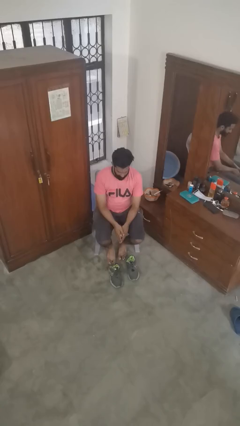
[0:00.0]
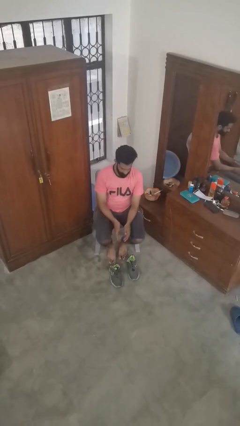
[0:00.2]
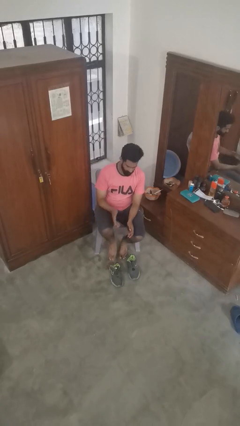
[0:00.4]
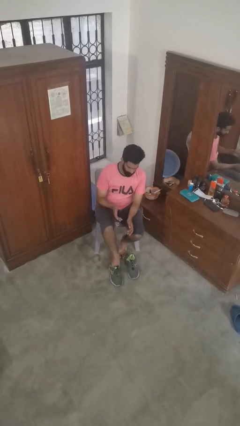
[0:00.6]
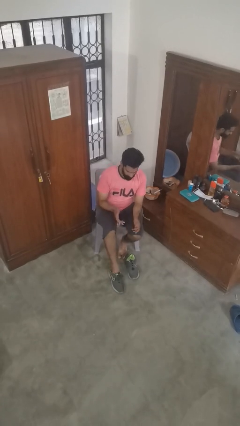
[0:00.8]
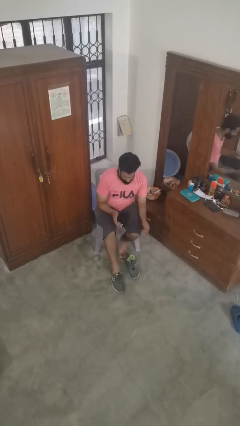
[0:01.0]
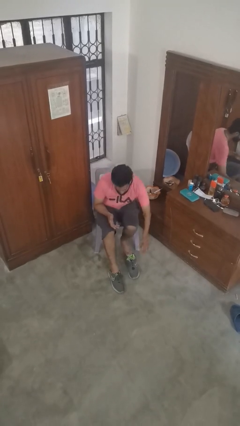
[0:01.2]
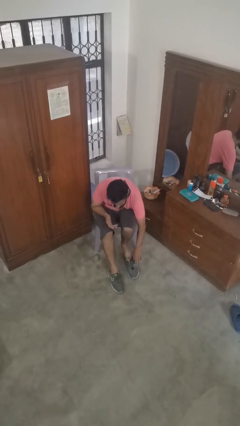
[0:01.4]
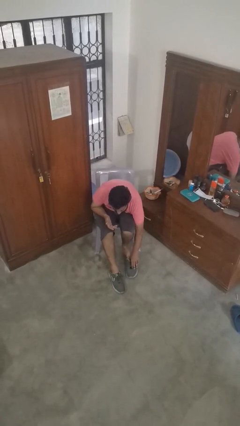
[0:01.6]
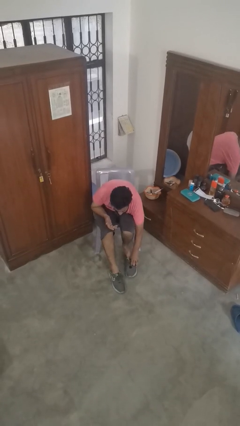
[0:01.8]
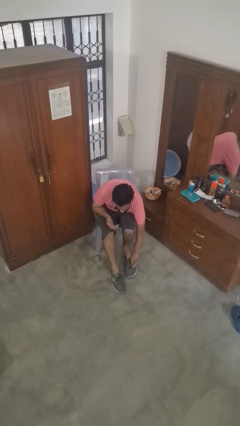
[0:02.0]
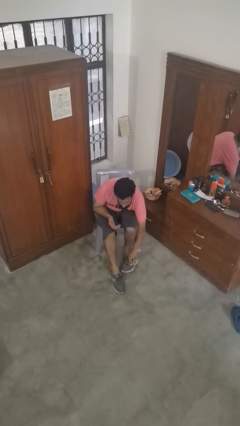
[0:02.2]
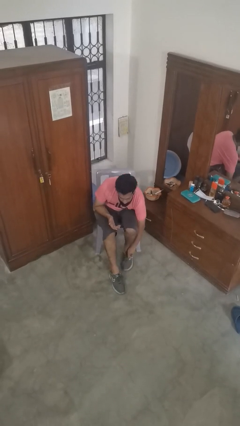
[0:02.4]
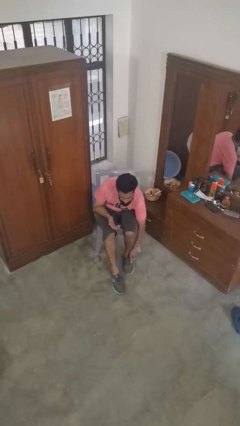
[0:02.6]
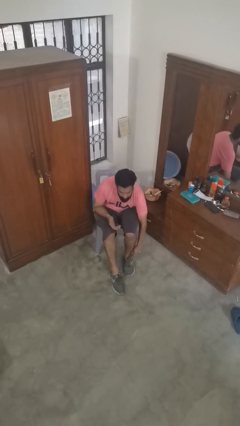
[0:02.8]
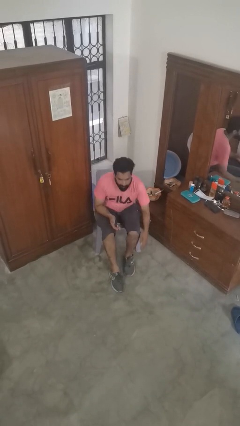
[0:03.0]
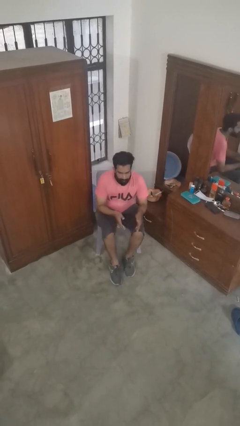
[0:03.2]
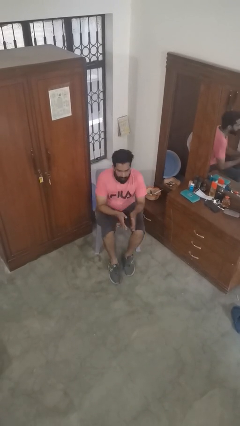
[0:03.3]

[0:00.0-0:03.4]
person puts on shoes

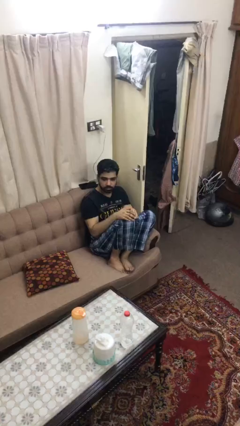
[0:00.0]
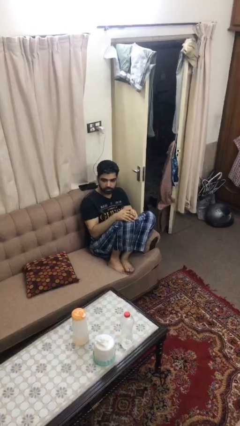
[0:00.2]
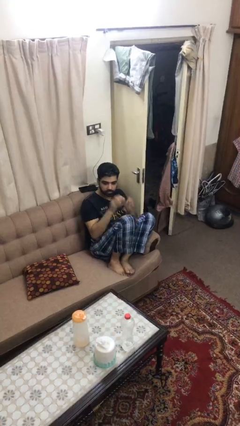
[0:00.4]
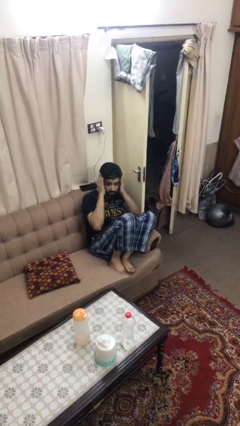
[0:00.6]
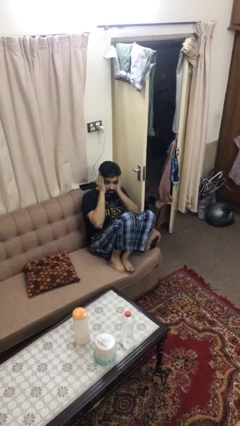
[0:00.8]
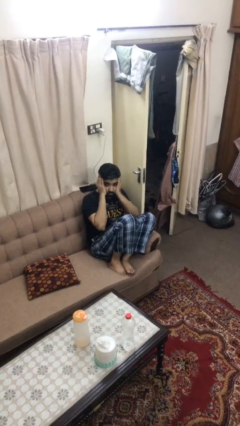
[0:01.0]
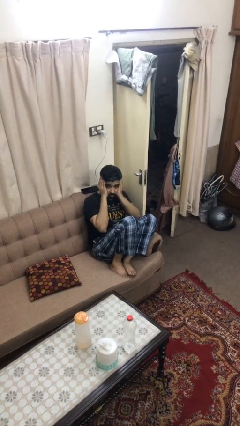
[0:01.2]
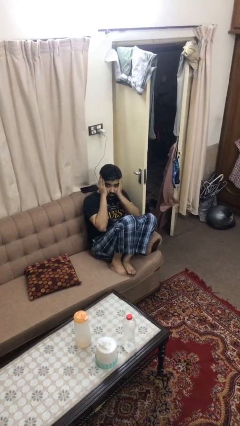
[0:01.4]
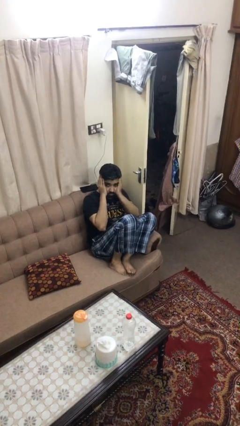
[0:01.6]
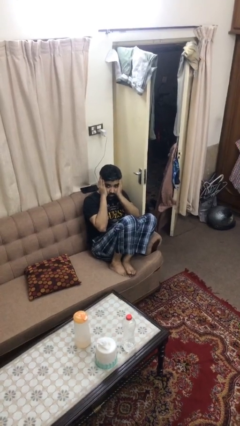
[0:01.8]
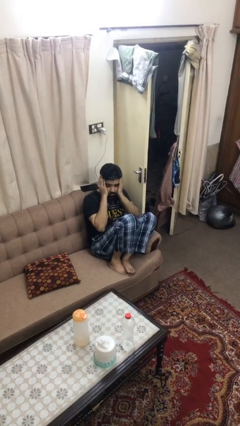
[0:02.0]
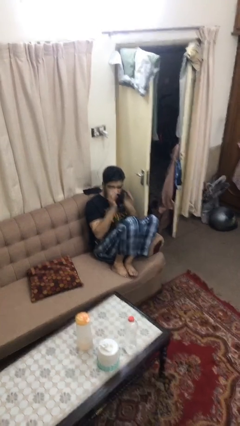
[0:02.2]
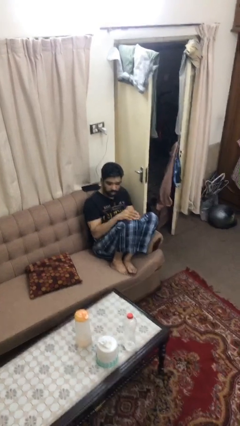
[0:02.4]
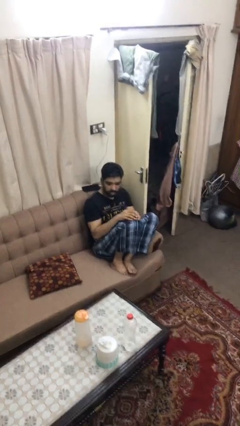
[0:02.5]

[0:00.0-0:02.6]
person covers face with hands

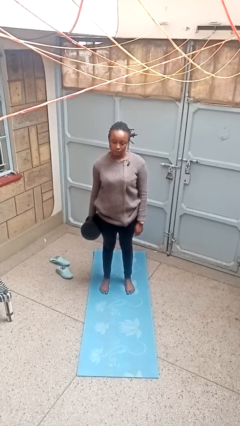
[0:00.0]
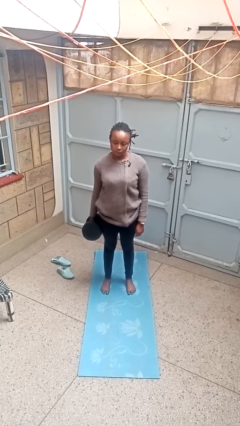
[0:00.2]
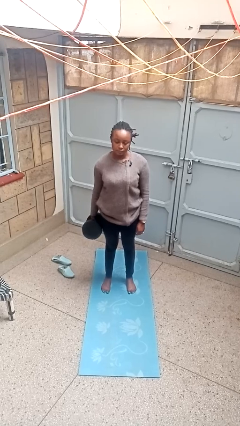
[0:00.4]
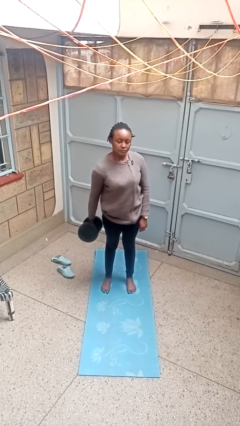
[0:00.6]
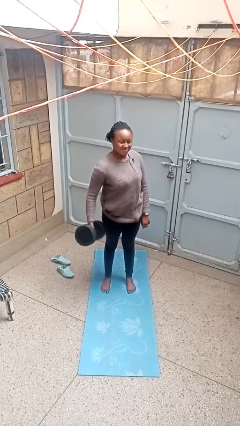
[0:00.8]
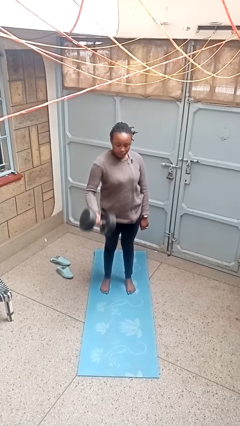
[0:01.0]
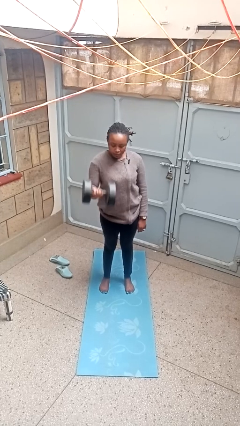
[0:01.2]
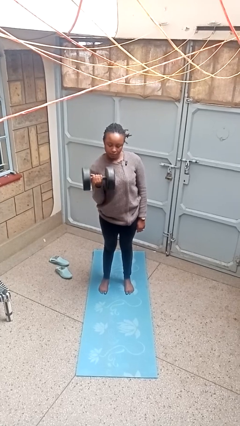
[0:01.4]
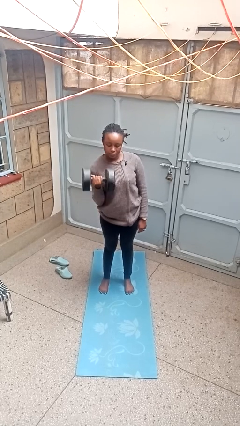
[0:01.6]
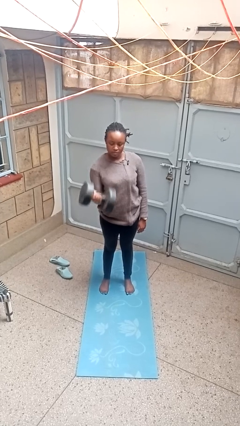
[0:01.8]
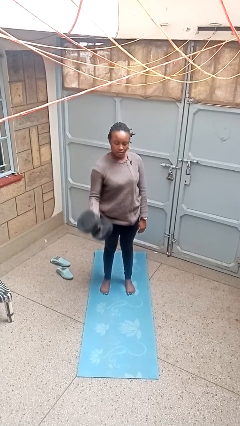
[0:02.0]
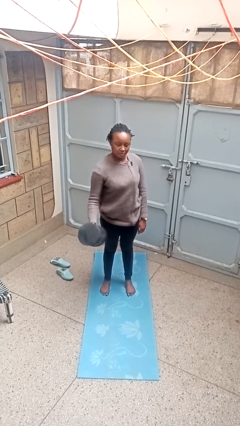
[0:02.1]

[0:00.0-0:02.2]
person lifts dumbbells

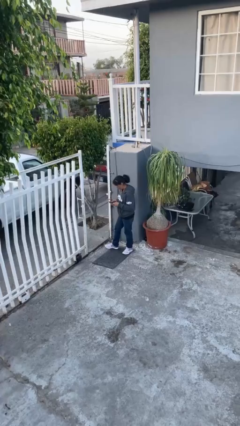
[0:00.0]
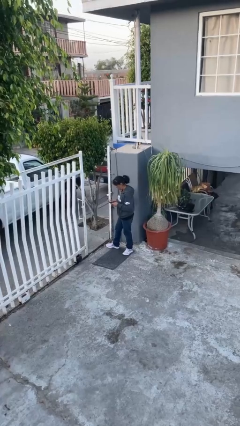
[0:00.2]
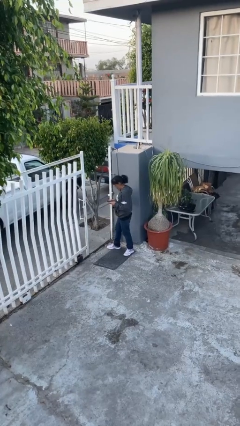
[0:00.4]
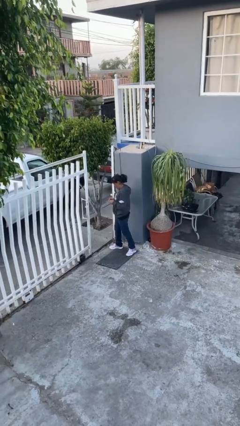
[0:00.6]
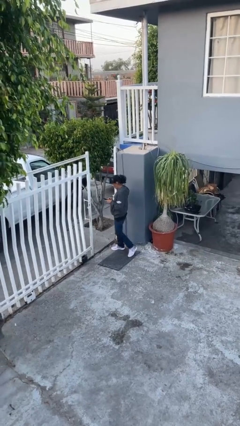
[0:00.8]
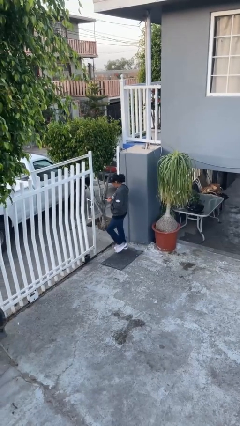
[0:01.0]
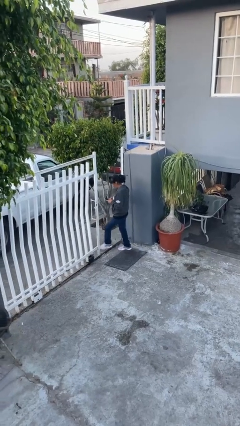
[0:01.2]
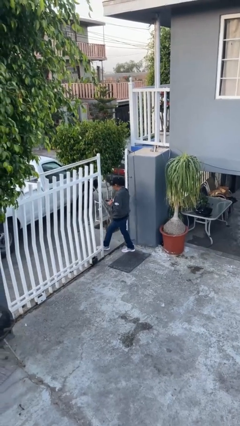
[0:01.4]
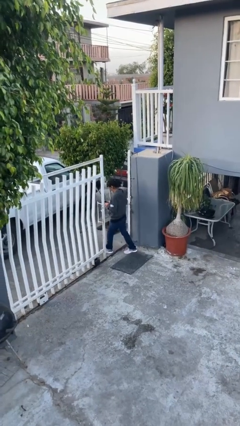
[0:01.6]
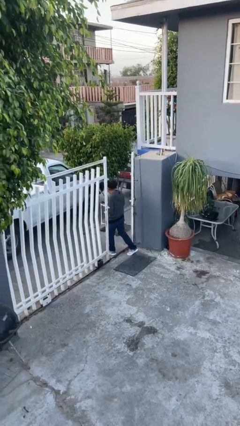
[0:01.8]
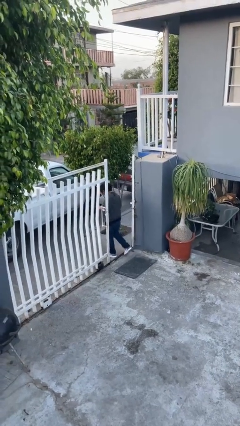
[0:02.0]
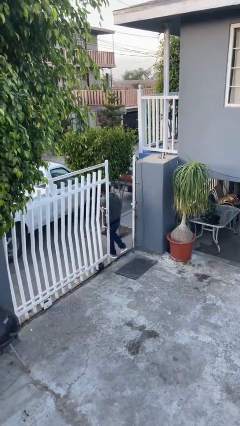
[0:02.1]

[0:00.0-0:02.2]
person exits scene through structure

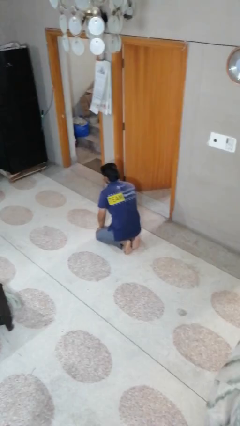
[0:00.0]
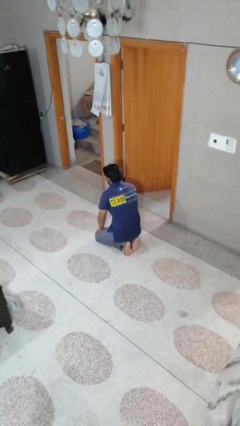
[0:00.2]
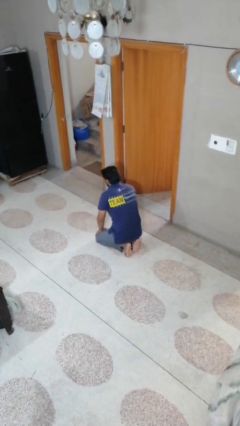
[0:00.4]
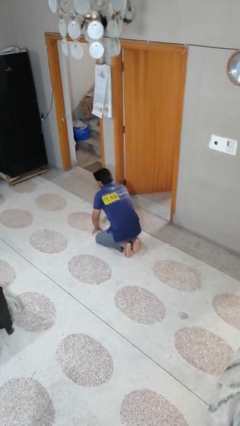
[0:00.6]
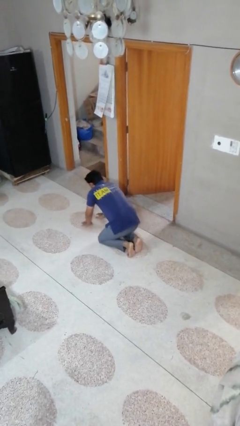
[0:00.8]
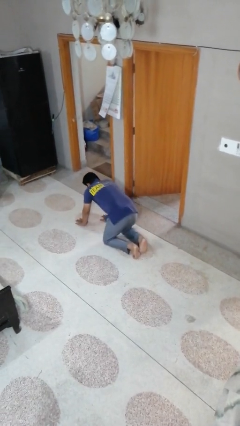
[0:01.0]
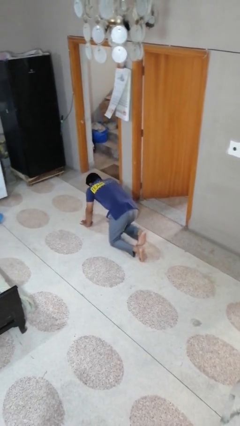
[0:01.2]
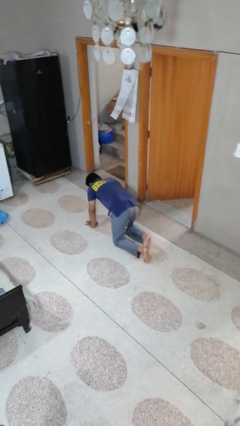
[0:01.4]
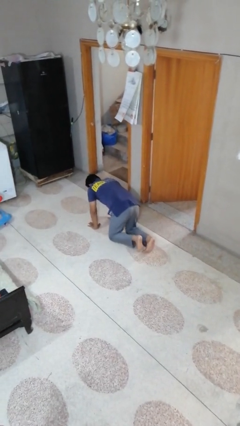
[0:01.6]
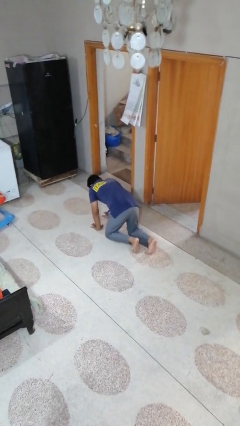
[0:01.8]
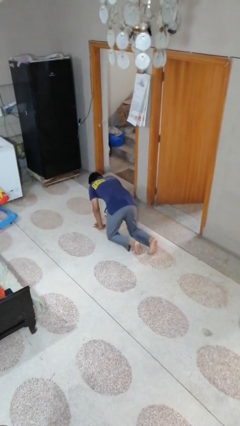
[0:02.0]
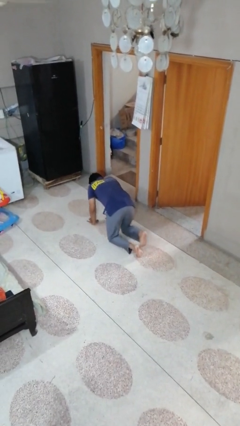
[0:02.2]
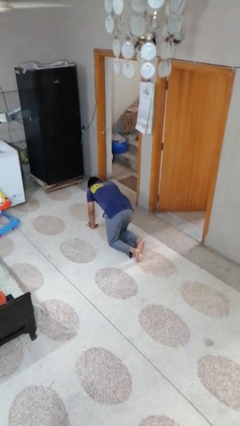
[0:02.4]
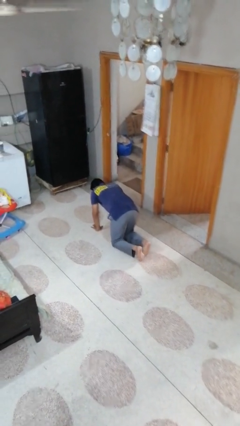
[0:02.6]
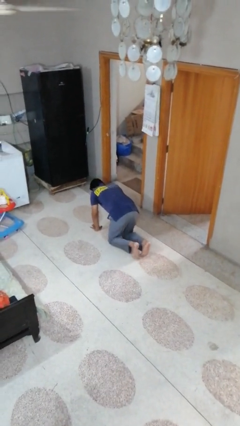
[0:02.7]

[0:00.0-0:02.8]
person crawls

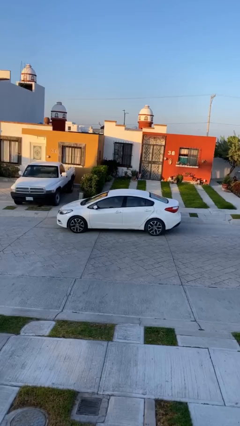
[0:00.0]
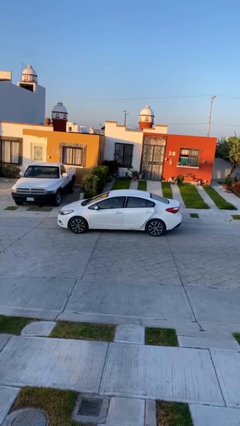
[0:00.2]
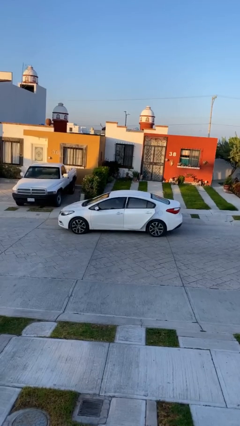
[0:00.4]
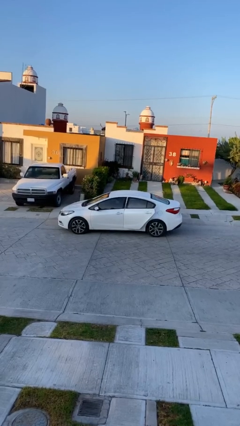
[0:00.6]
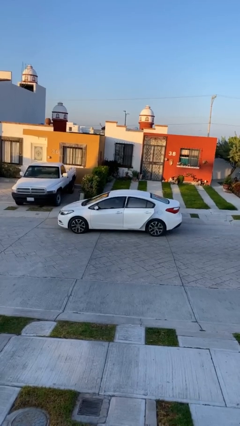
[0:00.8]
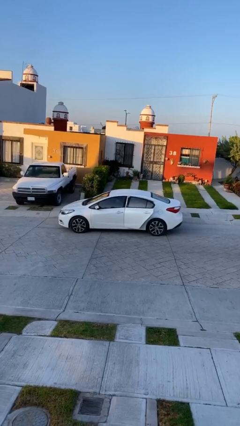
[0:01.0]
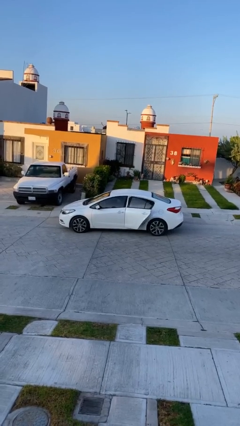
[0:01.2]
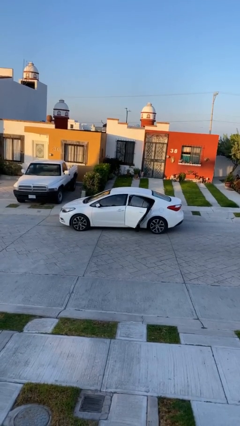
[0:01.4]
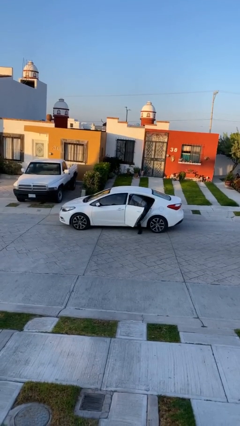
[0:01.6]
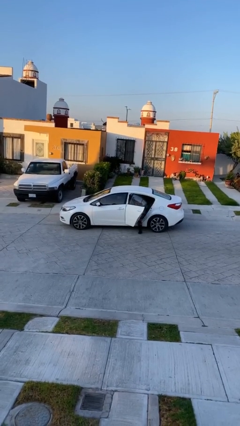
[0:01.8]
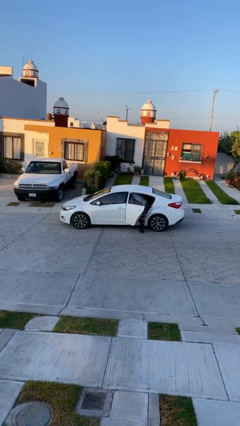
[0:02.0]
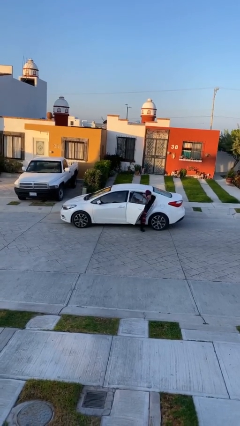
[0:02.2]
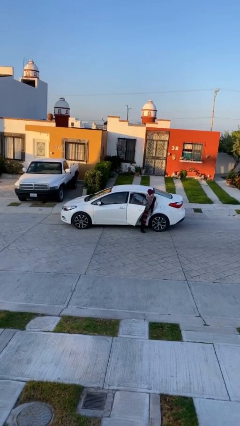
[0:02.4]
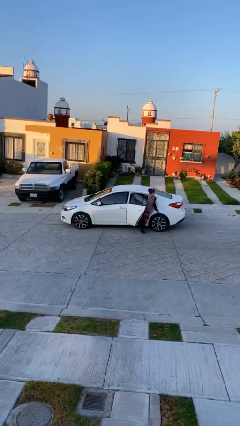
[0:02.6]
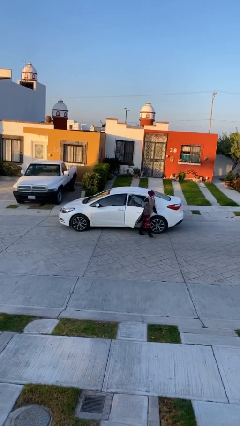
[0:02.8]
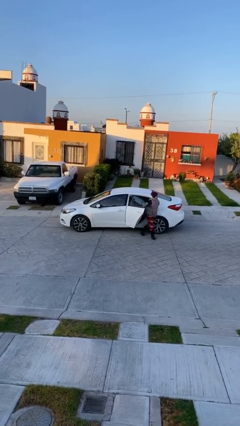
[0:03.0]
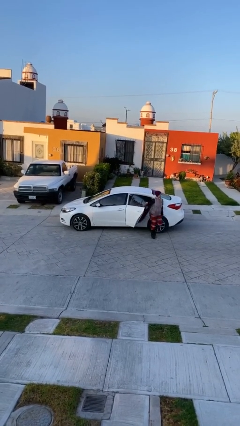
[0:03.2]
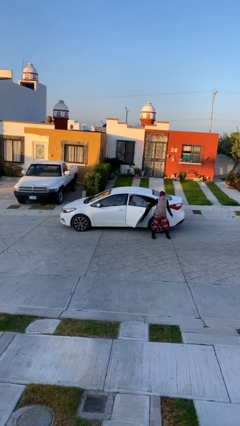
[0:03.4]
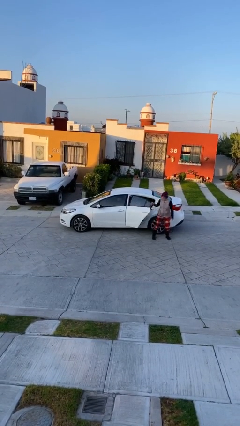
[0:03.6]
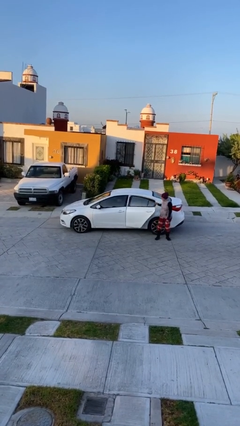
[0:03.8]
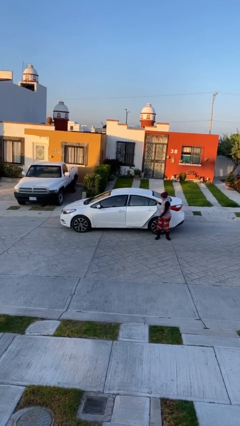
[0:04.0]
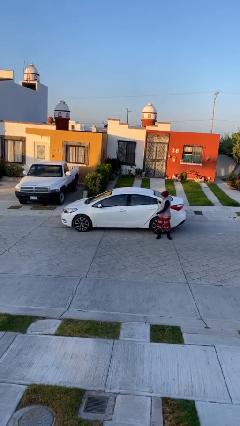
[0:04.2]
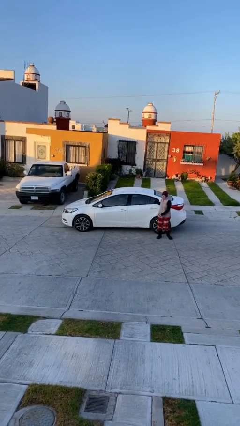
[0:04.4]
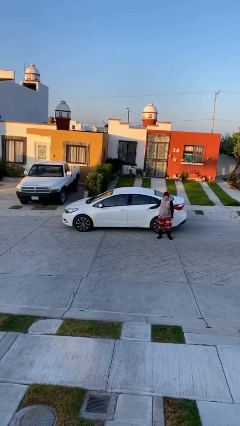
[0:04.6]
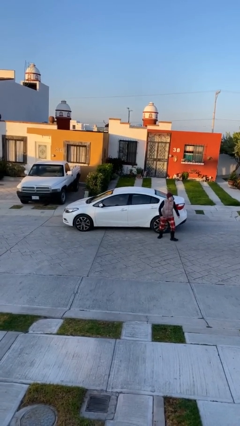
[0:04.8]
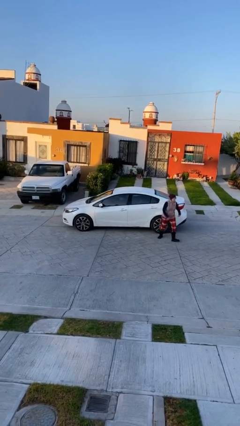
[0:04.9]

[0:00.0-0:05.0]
car drops off person
